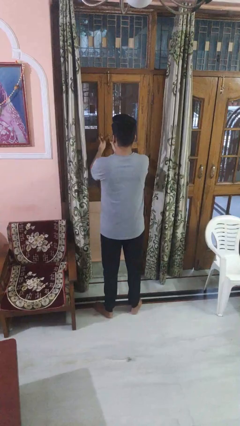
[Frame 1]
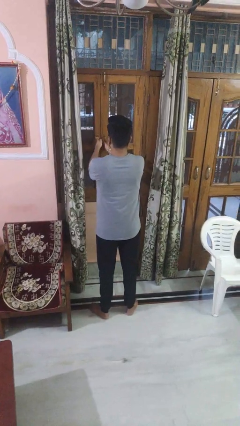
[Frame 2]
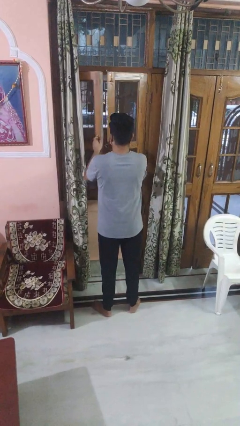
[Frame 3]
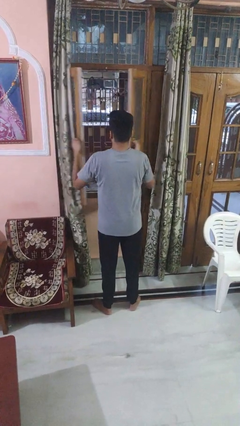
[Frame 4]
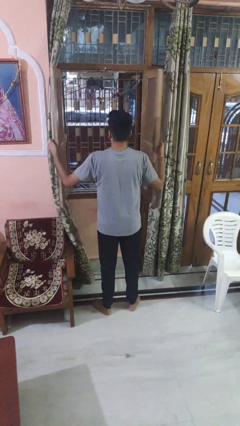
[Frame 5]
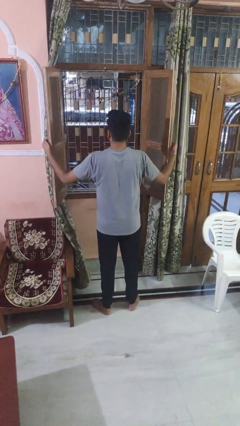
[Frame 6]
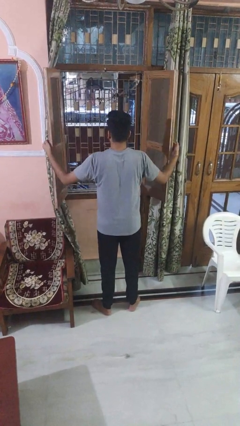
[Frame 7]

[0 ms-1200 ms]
person opens home window

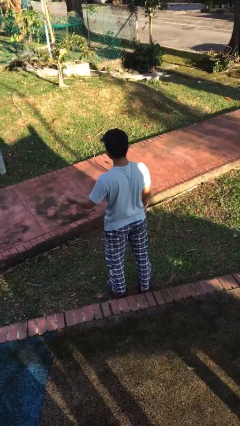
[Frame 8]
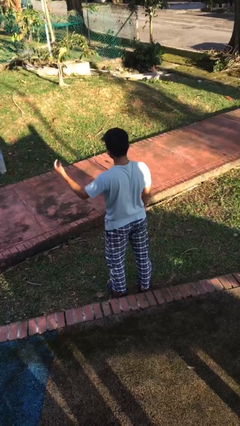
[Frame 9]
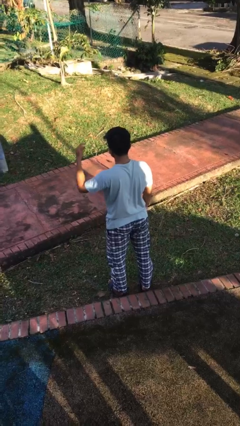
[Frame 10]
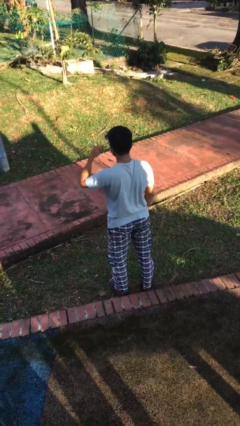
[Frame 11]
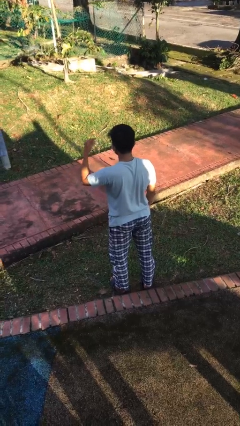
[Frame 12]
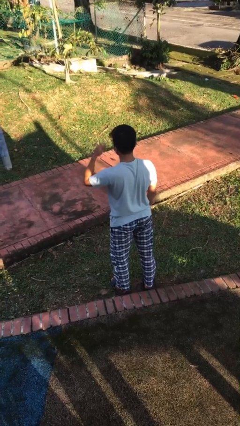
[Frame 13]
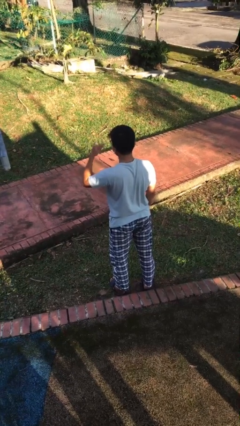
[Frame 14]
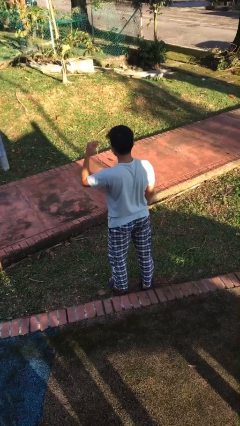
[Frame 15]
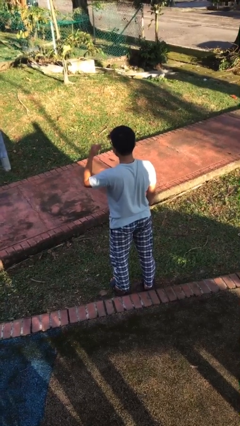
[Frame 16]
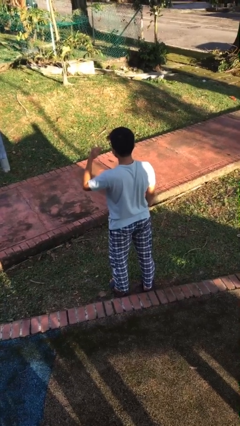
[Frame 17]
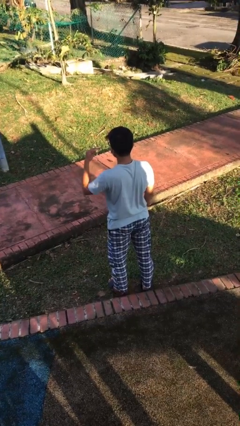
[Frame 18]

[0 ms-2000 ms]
person gestures listen closely

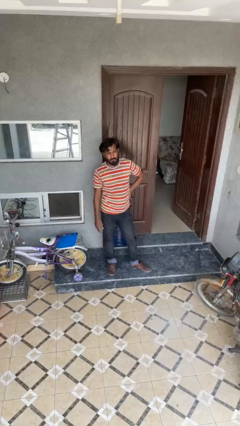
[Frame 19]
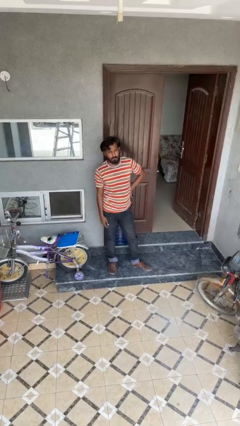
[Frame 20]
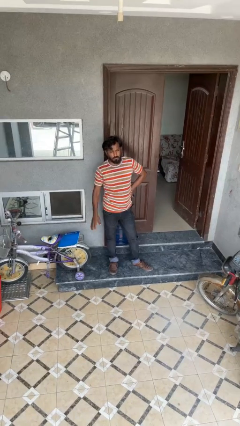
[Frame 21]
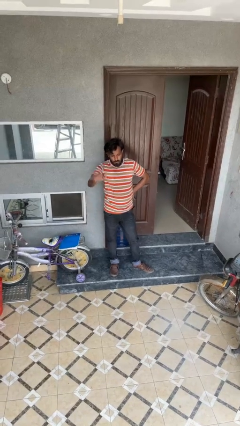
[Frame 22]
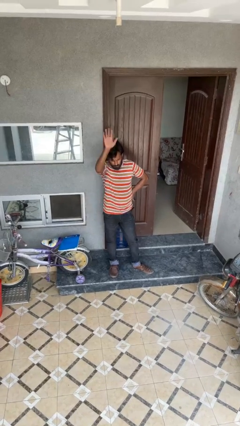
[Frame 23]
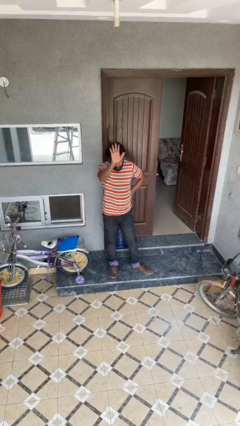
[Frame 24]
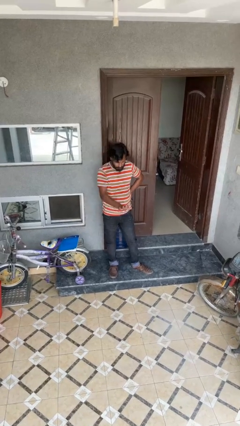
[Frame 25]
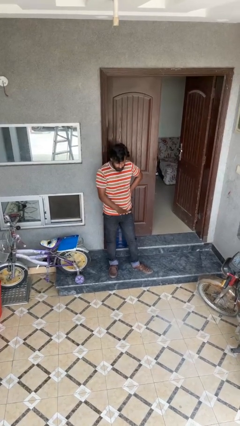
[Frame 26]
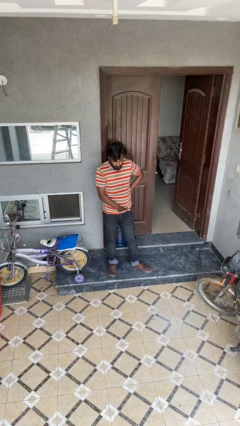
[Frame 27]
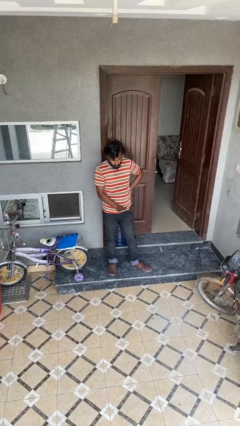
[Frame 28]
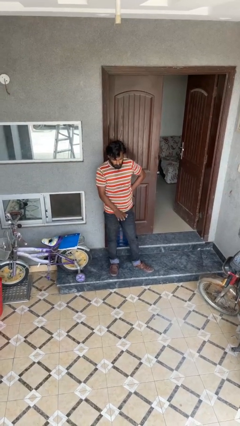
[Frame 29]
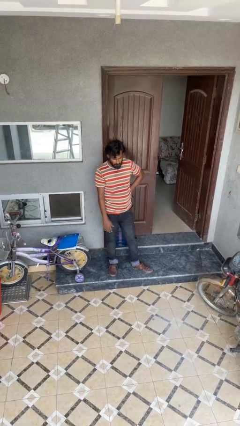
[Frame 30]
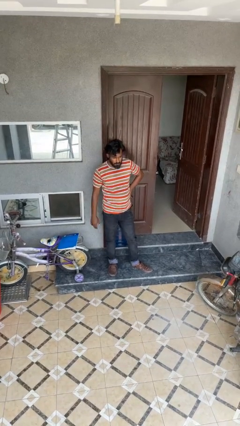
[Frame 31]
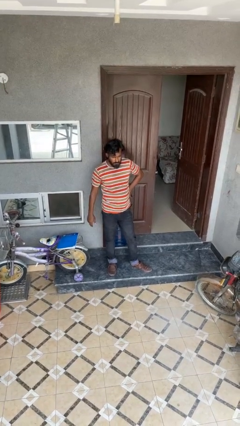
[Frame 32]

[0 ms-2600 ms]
person gestures swipe down

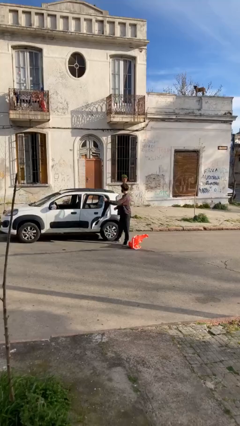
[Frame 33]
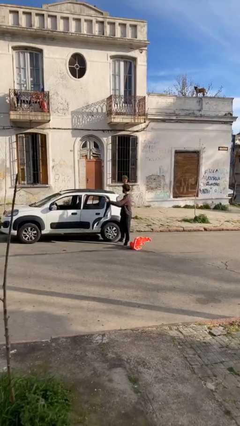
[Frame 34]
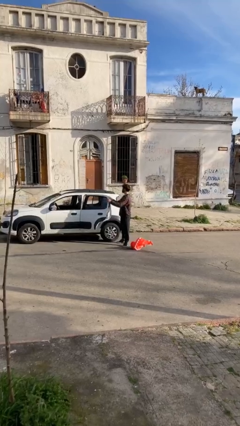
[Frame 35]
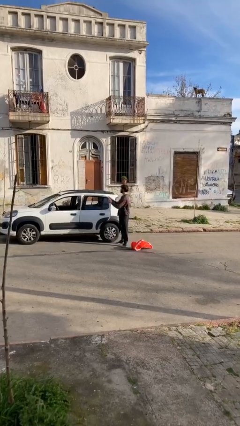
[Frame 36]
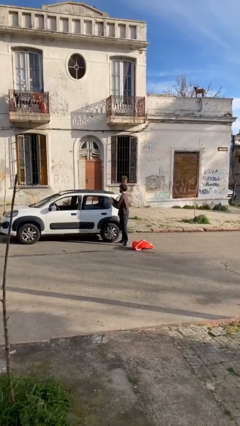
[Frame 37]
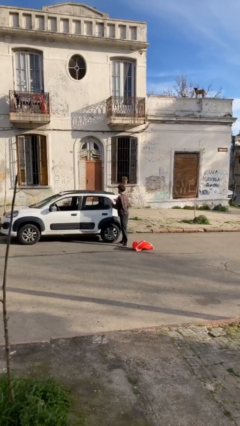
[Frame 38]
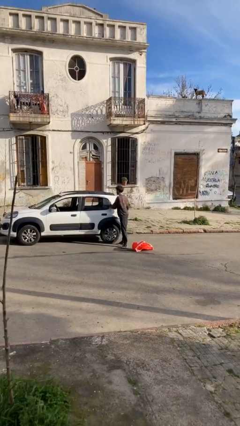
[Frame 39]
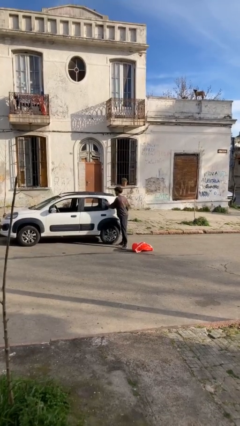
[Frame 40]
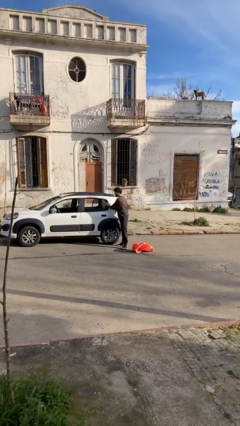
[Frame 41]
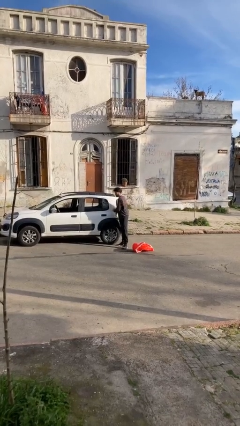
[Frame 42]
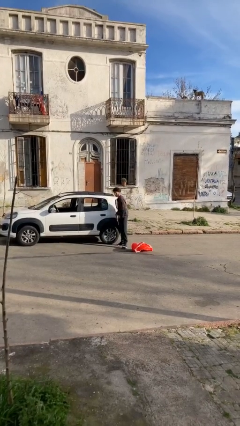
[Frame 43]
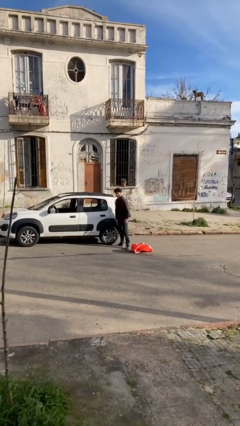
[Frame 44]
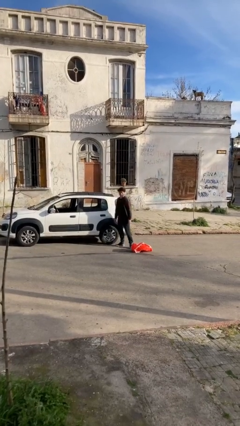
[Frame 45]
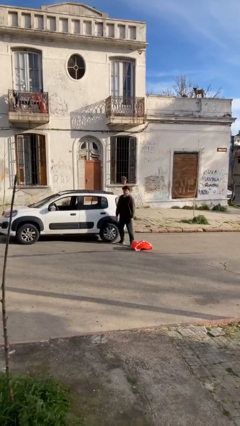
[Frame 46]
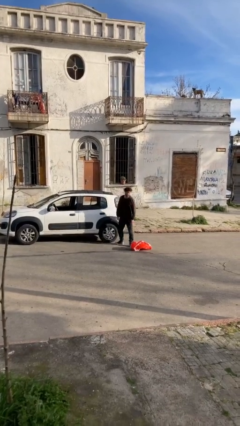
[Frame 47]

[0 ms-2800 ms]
person closes car door

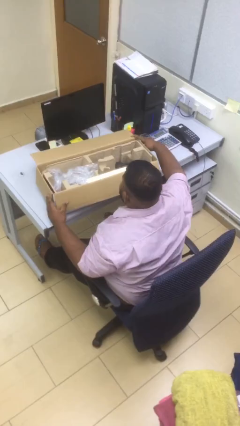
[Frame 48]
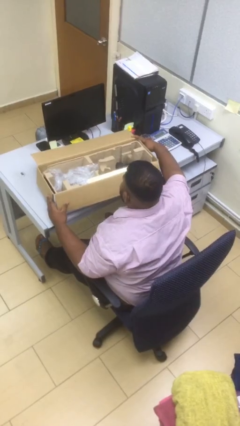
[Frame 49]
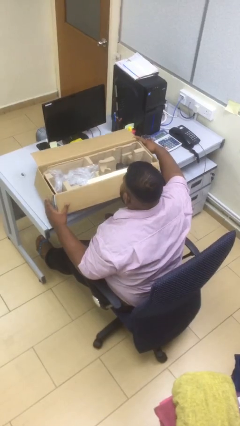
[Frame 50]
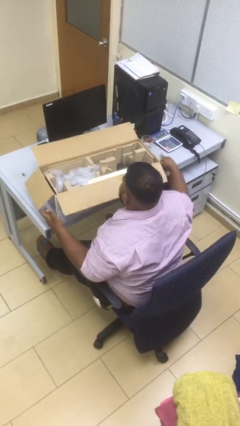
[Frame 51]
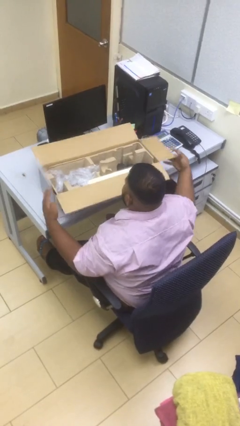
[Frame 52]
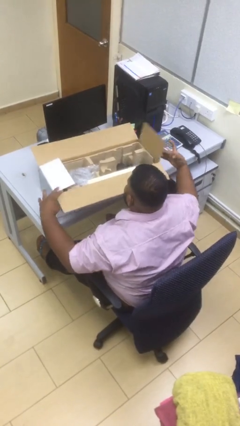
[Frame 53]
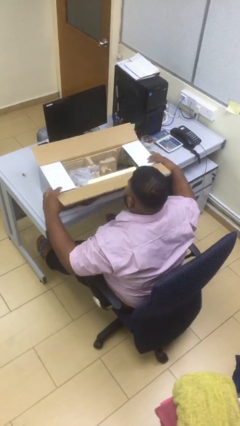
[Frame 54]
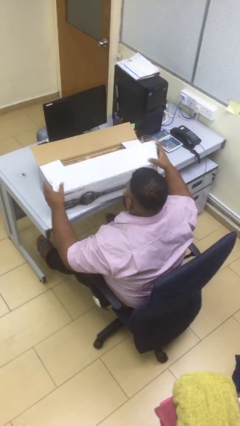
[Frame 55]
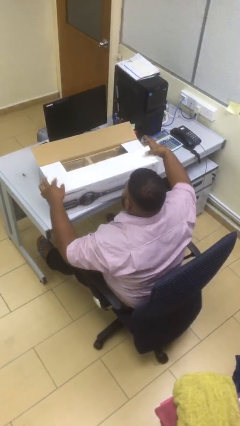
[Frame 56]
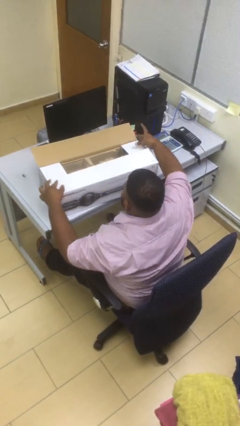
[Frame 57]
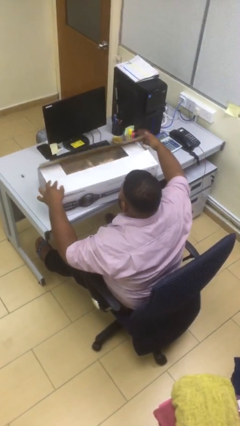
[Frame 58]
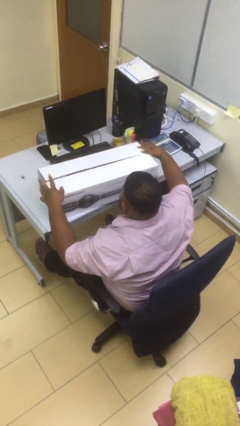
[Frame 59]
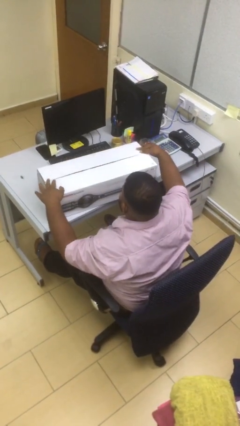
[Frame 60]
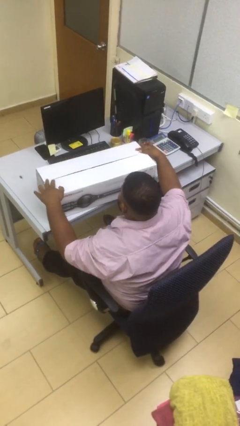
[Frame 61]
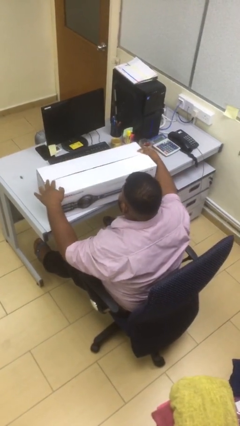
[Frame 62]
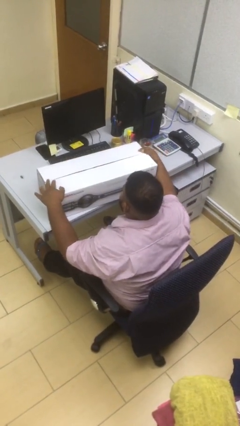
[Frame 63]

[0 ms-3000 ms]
person closes box

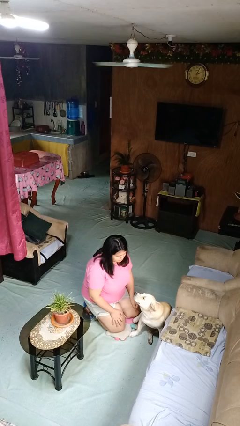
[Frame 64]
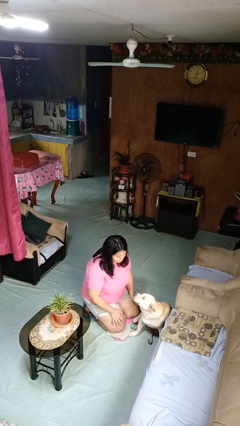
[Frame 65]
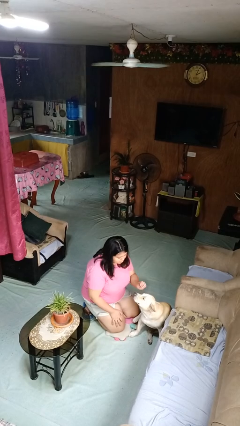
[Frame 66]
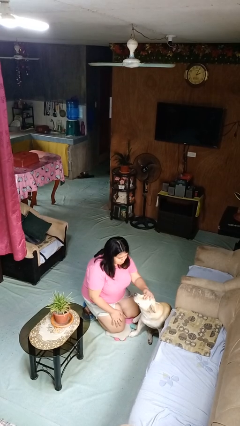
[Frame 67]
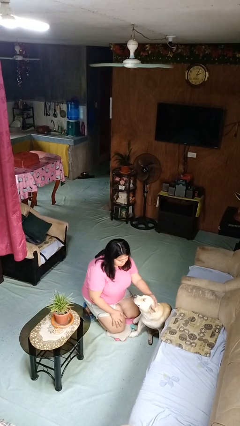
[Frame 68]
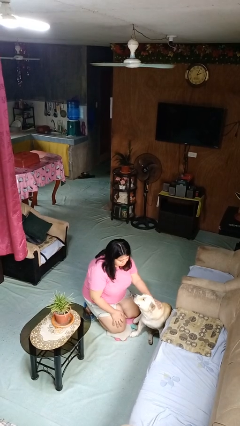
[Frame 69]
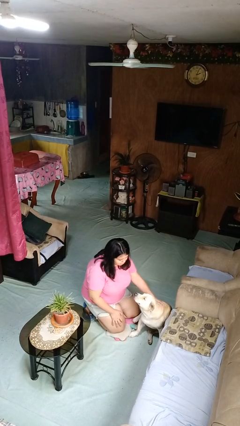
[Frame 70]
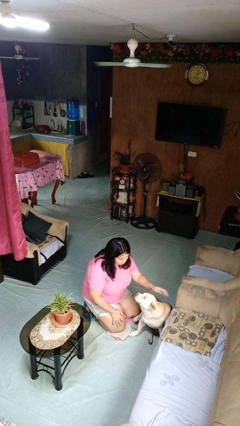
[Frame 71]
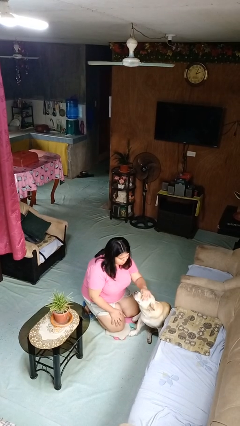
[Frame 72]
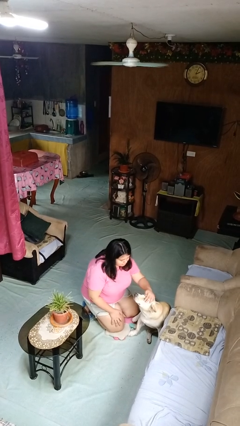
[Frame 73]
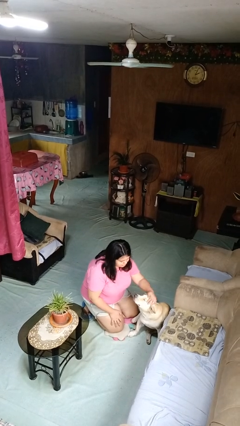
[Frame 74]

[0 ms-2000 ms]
person pets dog

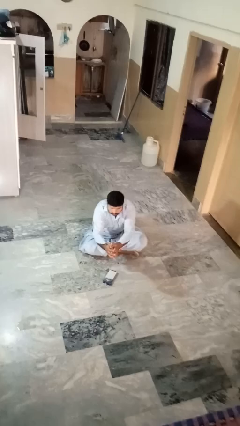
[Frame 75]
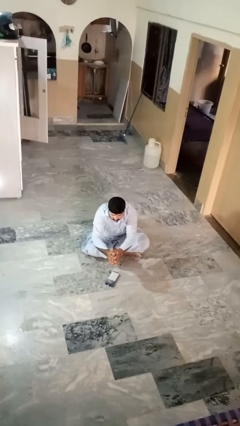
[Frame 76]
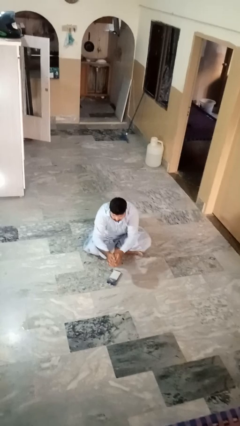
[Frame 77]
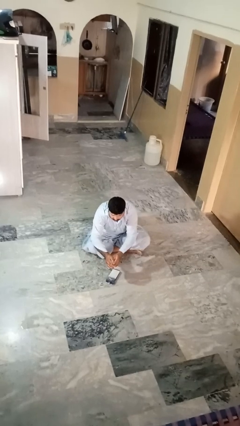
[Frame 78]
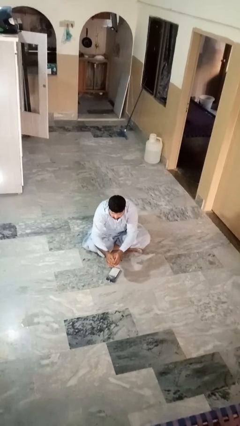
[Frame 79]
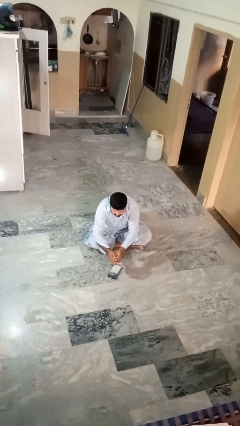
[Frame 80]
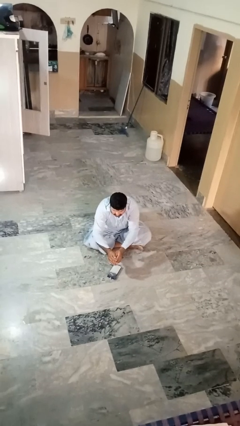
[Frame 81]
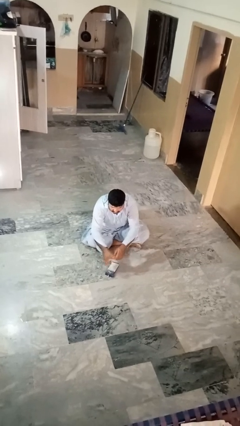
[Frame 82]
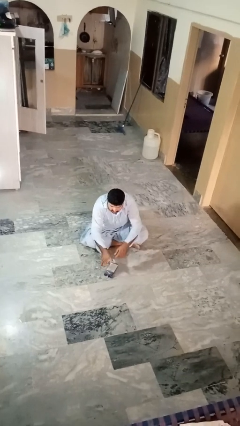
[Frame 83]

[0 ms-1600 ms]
person catches dropped object

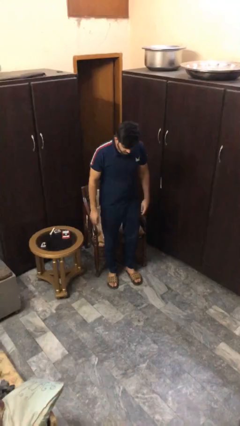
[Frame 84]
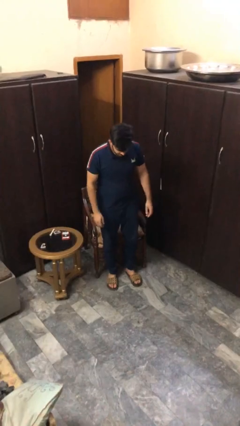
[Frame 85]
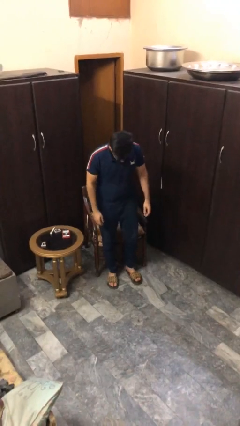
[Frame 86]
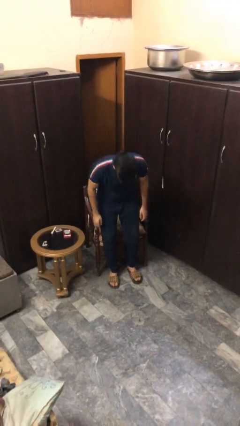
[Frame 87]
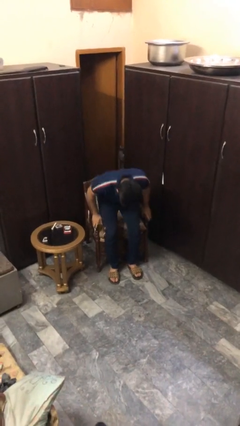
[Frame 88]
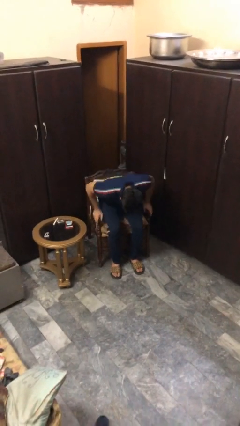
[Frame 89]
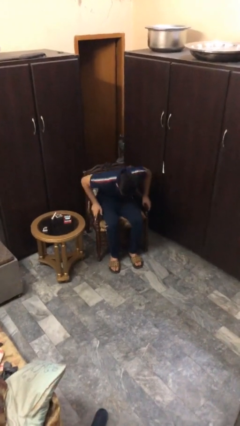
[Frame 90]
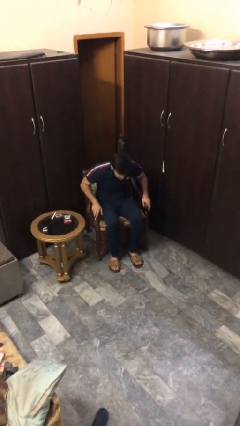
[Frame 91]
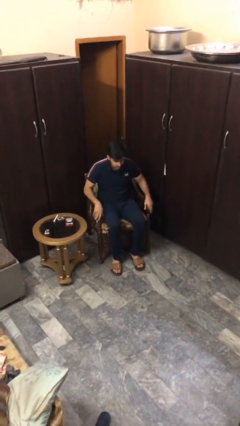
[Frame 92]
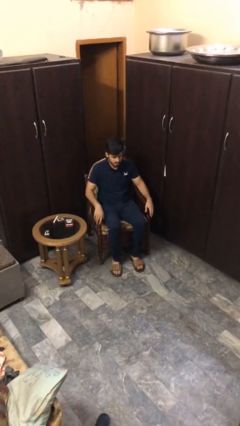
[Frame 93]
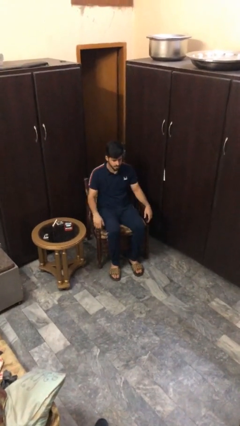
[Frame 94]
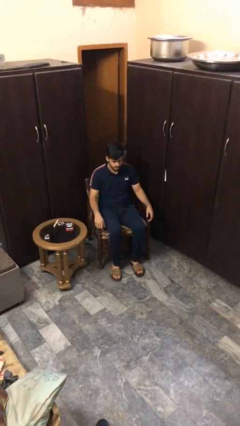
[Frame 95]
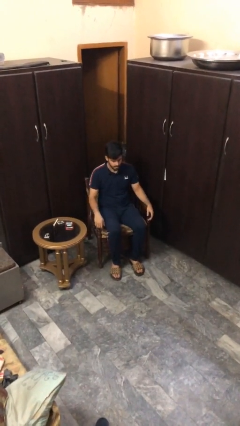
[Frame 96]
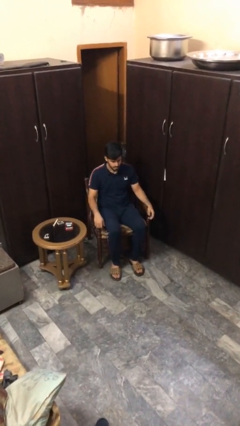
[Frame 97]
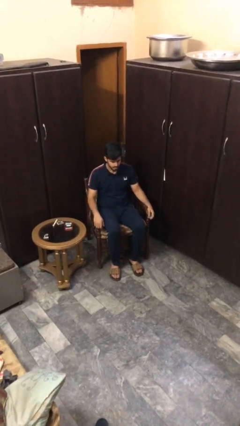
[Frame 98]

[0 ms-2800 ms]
person sits down
